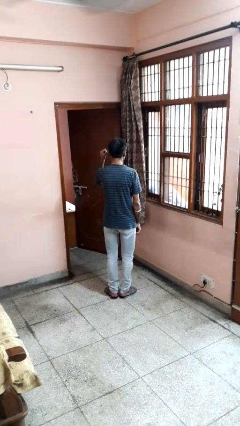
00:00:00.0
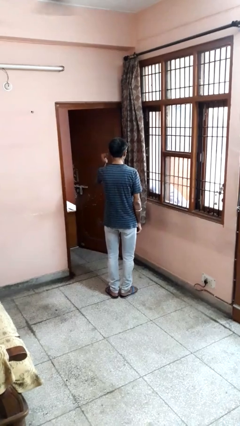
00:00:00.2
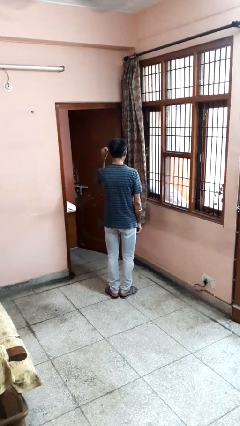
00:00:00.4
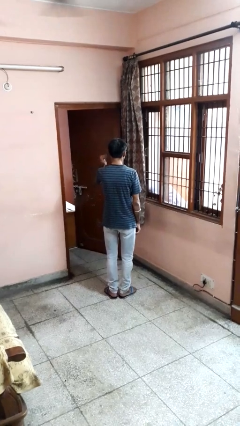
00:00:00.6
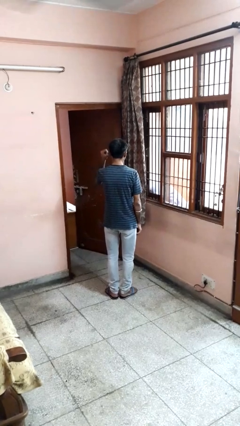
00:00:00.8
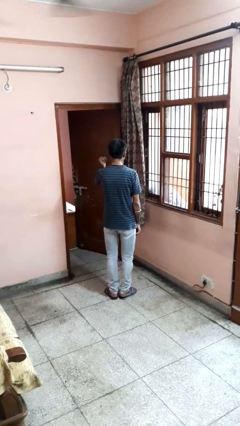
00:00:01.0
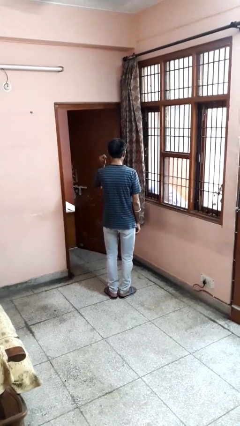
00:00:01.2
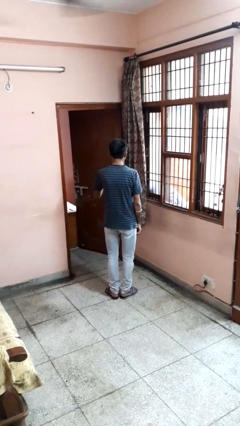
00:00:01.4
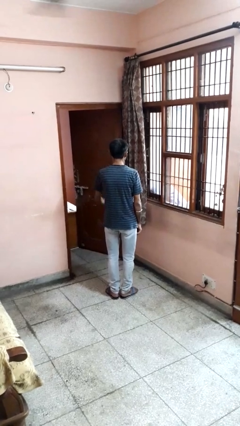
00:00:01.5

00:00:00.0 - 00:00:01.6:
person gestures behind me

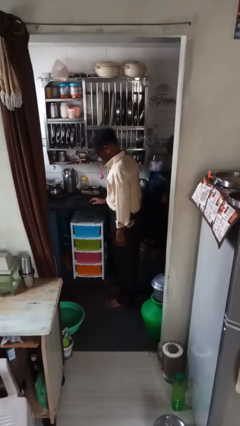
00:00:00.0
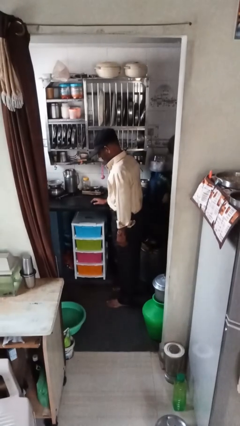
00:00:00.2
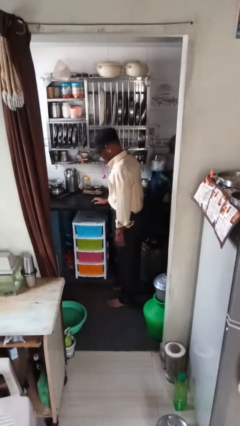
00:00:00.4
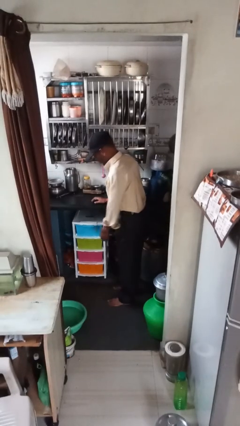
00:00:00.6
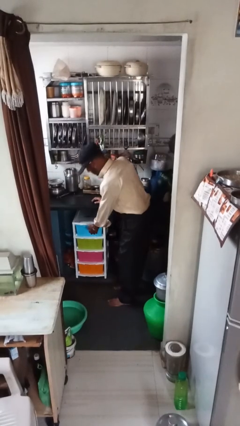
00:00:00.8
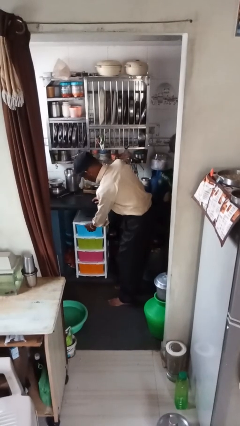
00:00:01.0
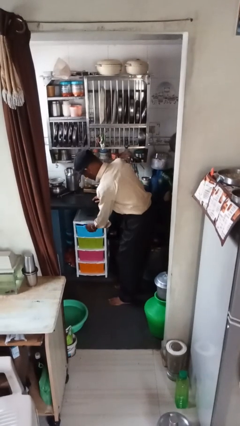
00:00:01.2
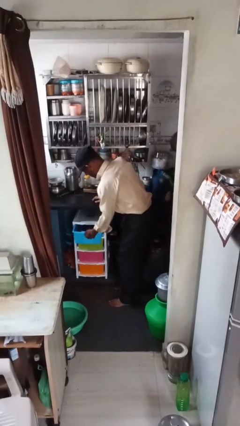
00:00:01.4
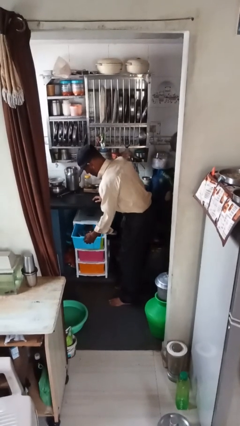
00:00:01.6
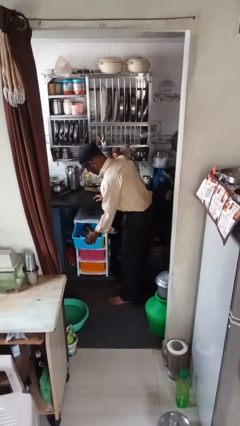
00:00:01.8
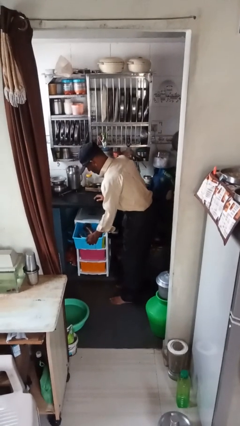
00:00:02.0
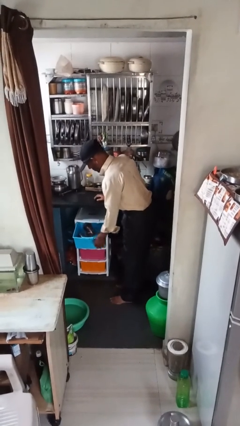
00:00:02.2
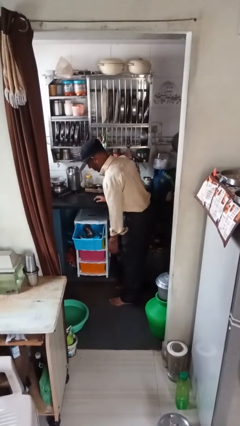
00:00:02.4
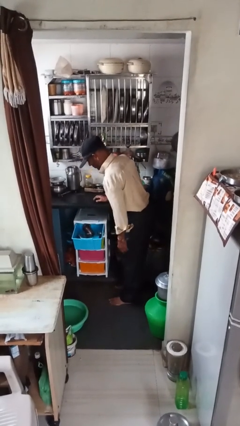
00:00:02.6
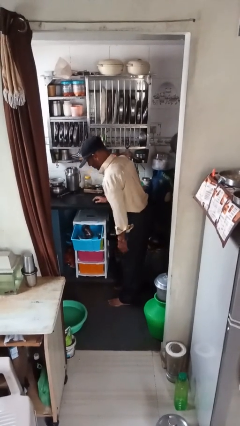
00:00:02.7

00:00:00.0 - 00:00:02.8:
person opens kitchen drawer

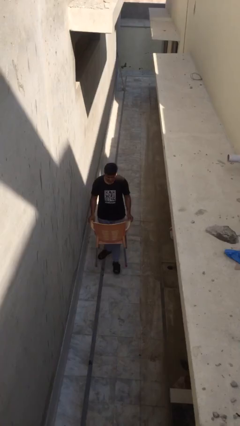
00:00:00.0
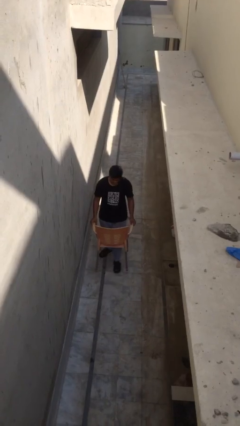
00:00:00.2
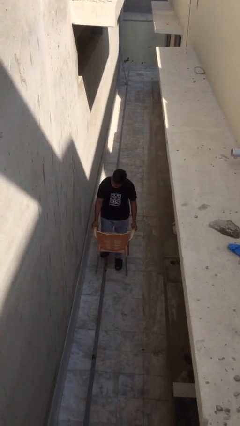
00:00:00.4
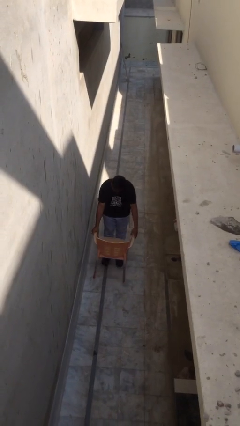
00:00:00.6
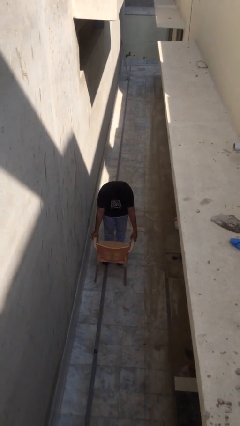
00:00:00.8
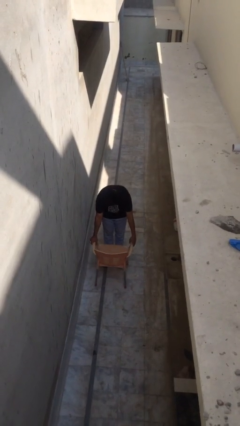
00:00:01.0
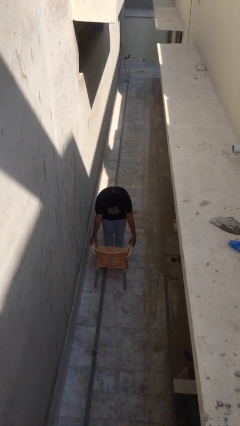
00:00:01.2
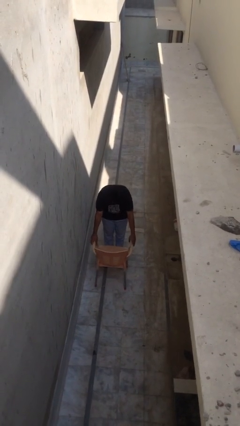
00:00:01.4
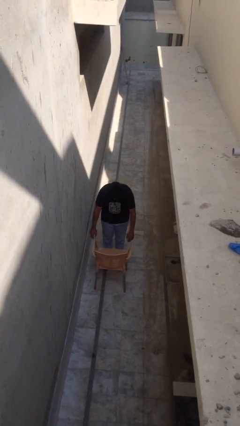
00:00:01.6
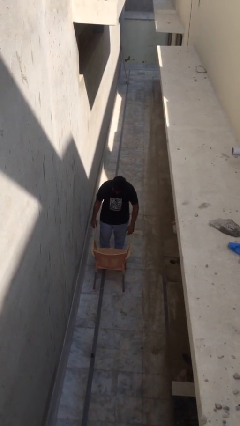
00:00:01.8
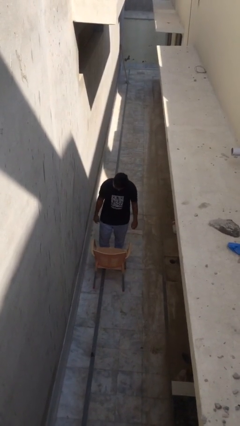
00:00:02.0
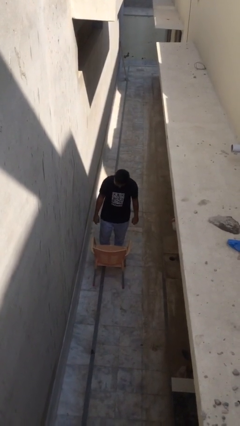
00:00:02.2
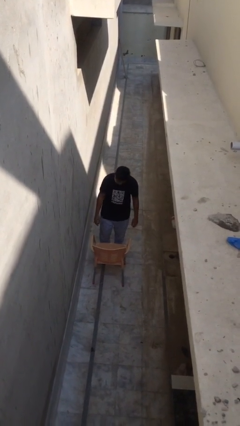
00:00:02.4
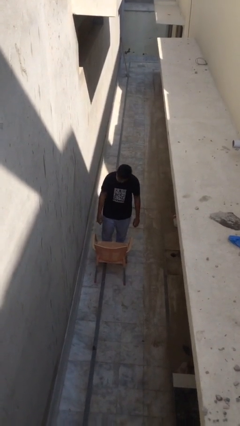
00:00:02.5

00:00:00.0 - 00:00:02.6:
person puts down object on floor

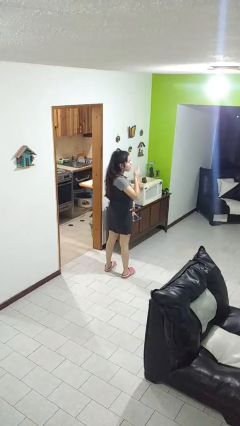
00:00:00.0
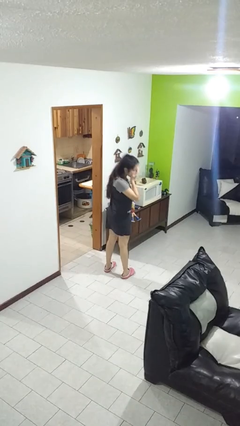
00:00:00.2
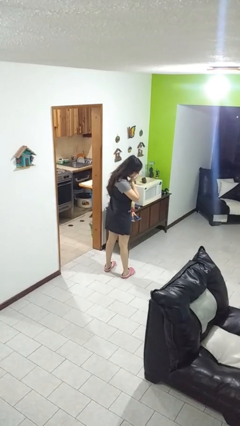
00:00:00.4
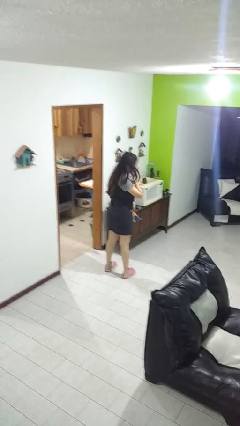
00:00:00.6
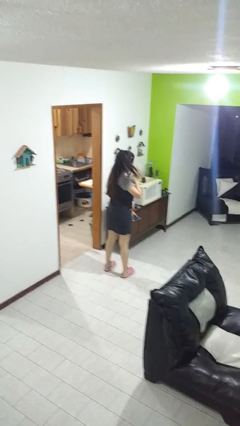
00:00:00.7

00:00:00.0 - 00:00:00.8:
person sneezes into hand

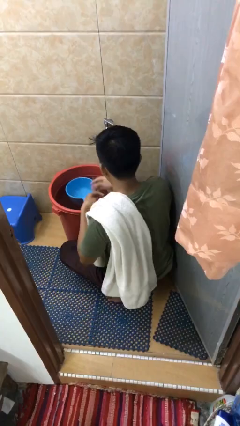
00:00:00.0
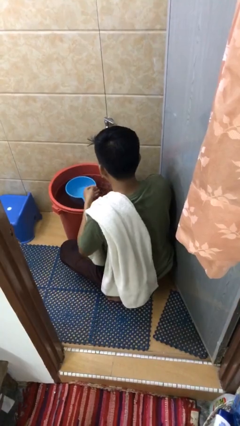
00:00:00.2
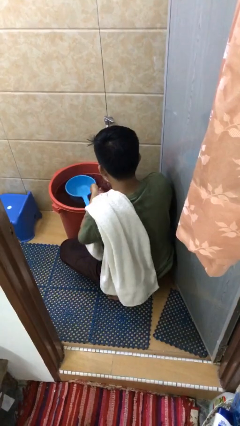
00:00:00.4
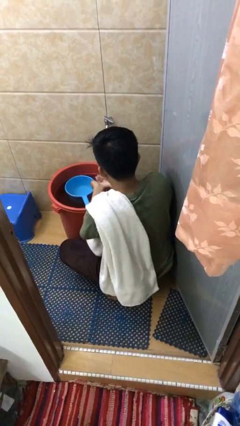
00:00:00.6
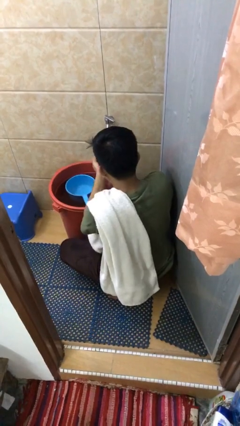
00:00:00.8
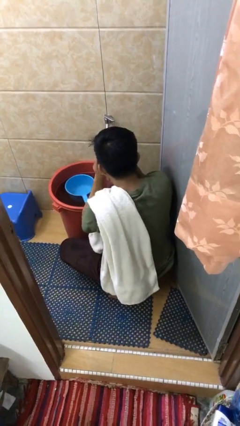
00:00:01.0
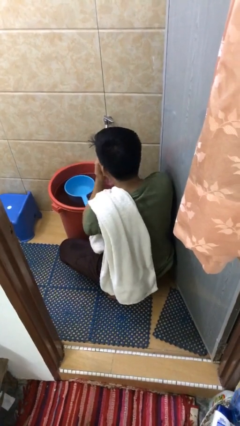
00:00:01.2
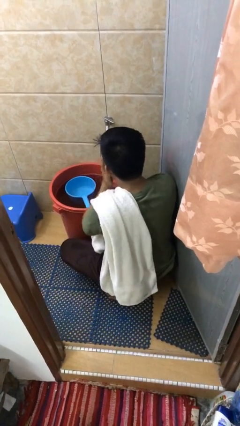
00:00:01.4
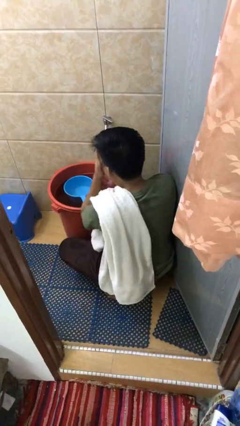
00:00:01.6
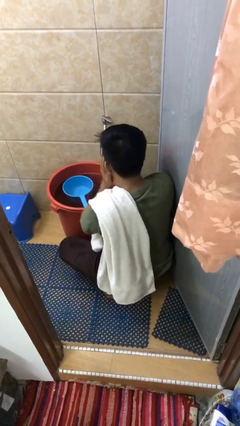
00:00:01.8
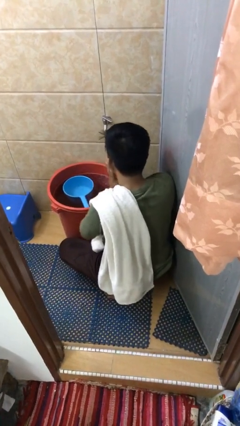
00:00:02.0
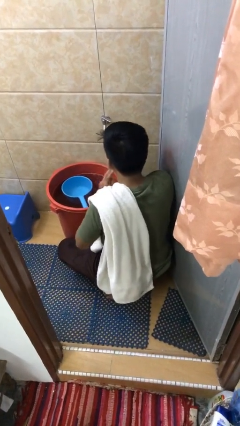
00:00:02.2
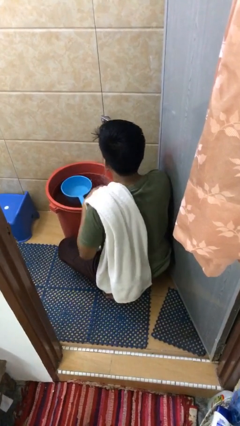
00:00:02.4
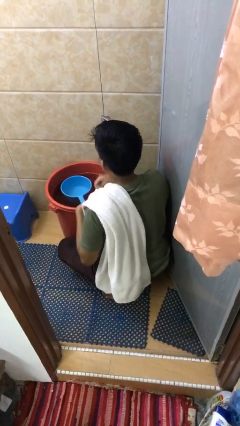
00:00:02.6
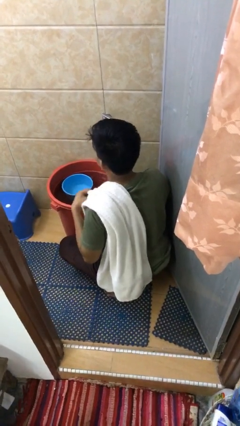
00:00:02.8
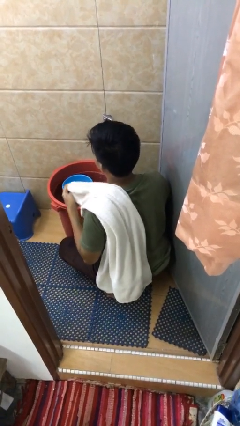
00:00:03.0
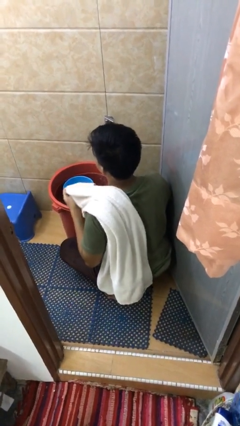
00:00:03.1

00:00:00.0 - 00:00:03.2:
person washes face

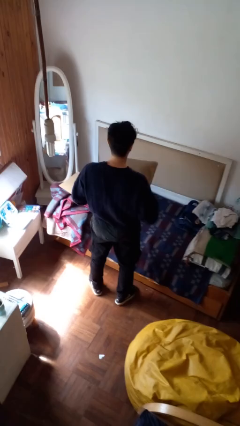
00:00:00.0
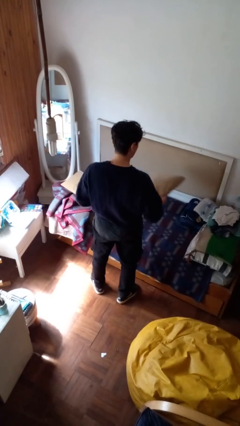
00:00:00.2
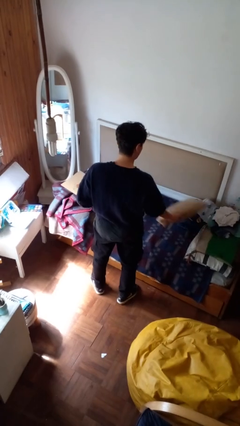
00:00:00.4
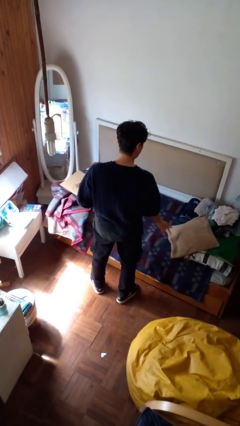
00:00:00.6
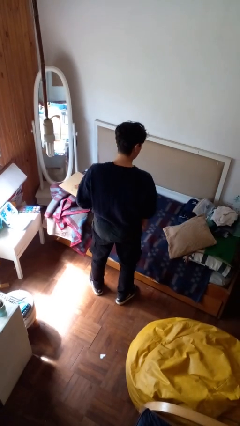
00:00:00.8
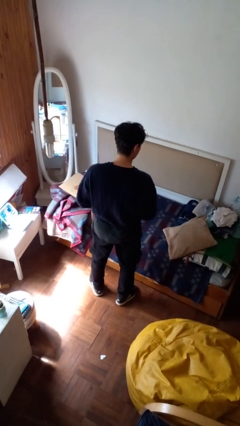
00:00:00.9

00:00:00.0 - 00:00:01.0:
person puts down object on bed

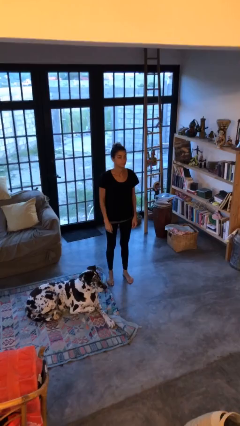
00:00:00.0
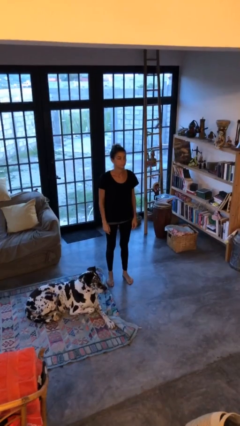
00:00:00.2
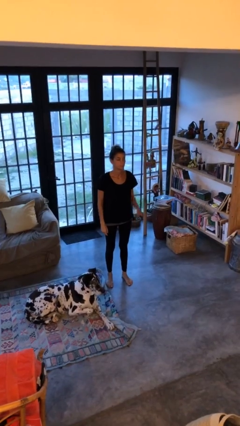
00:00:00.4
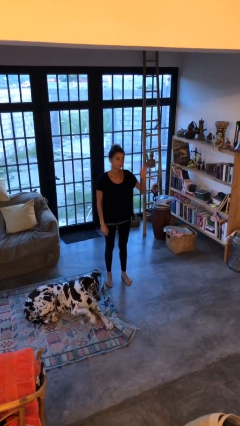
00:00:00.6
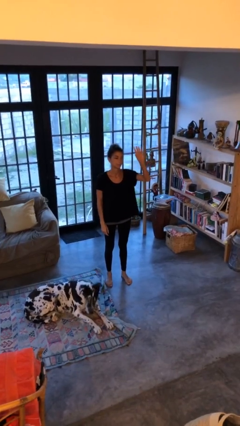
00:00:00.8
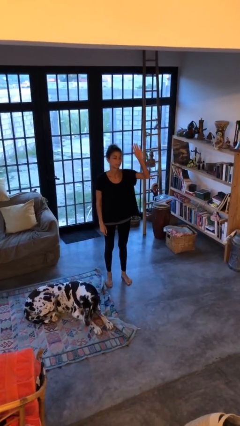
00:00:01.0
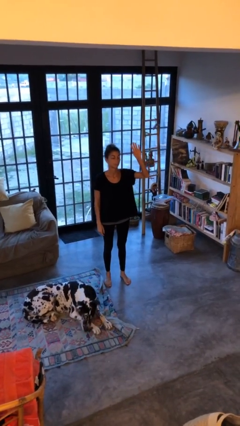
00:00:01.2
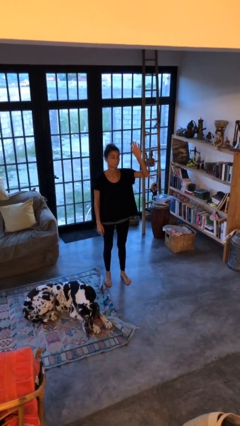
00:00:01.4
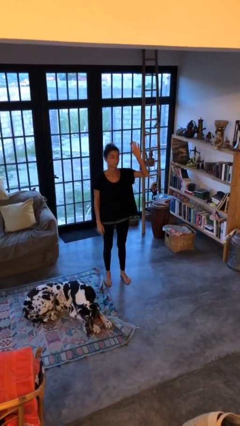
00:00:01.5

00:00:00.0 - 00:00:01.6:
person gestures raise hand

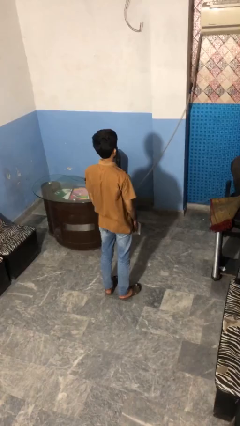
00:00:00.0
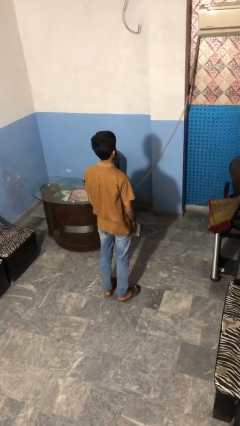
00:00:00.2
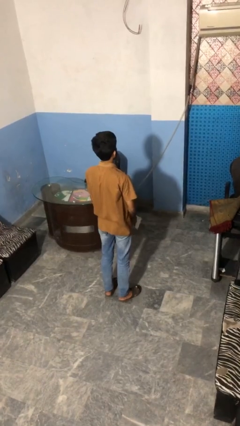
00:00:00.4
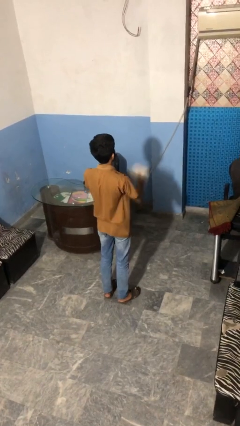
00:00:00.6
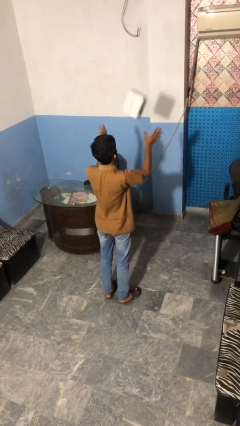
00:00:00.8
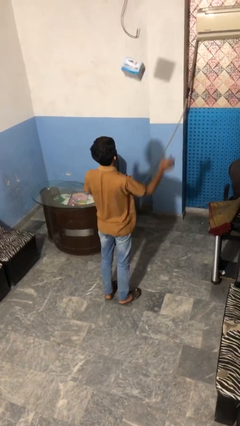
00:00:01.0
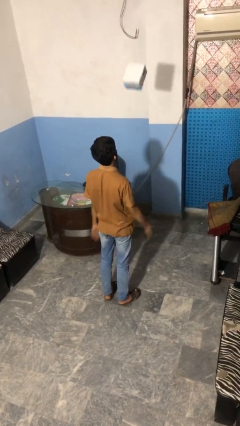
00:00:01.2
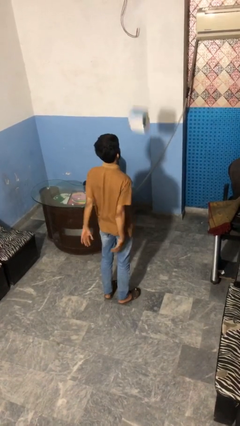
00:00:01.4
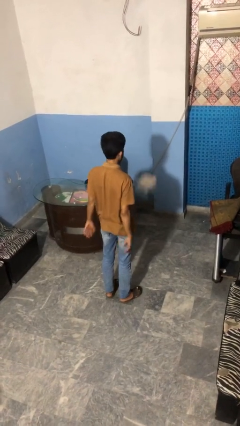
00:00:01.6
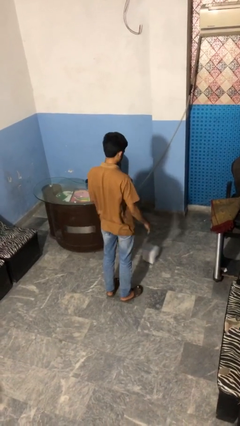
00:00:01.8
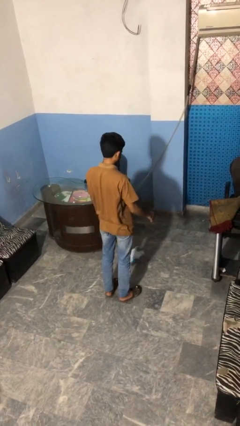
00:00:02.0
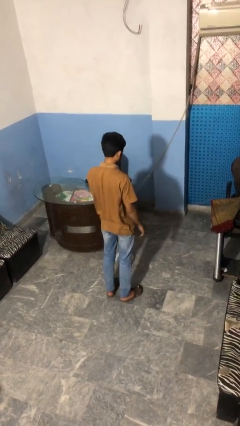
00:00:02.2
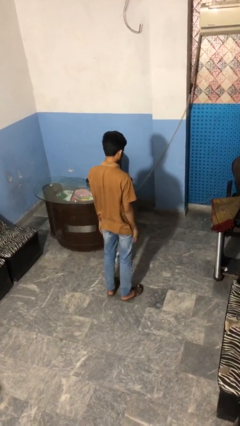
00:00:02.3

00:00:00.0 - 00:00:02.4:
person throws object into air

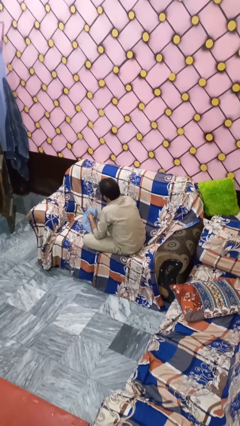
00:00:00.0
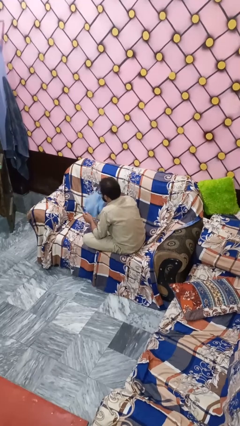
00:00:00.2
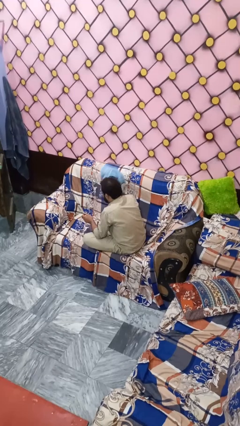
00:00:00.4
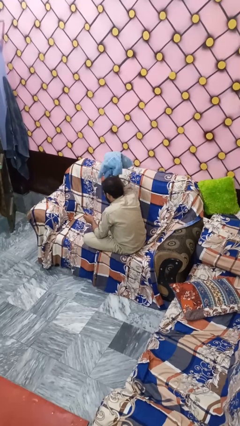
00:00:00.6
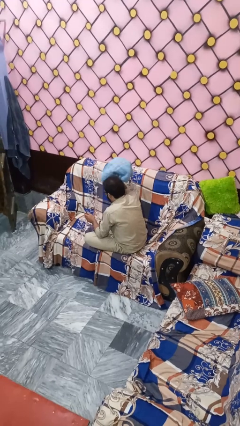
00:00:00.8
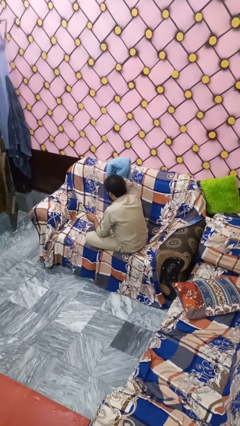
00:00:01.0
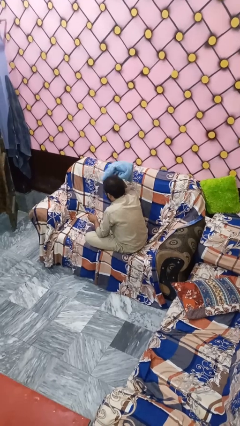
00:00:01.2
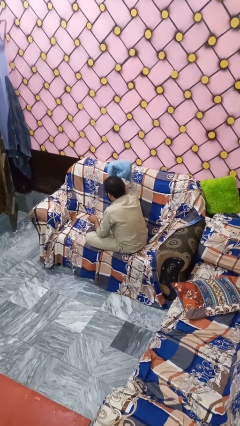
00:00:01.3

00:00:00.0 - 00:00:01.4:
person dries hair with towel
